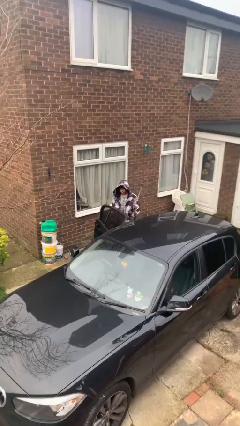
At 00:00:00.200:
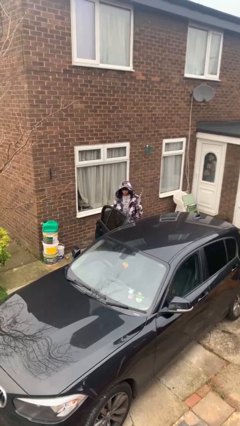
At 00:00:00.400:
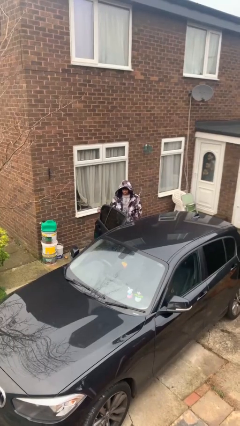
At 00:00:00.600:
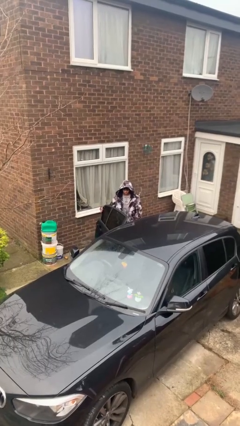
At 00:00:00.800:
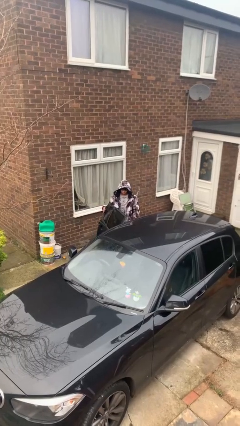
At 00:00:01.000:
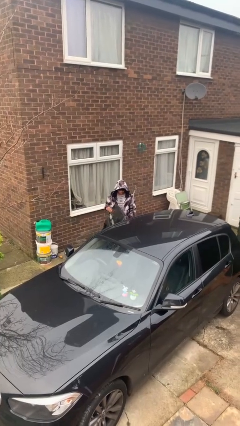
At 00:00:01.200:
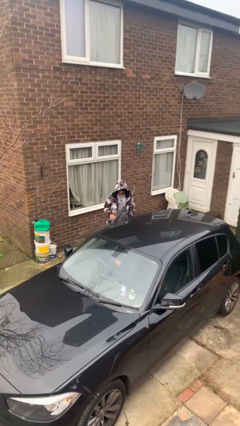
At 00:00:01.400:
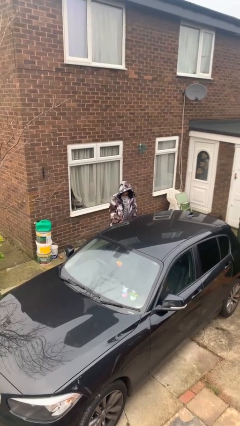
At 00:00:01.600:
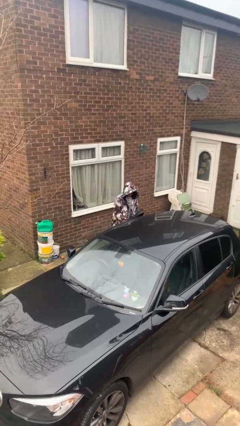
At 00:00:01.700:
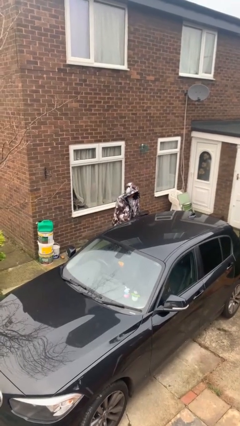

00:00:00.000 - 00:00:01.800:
person closes car door

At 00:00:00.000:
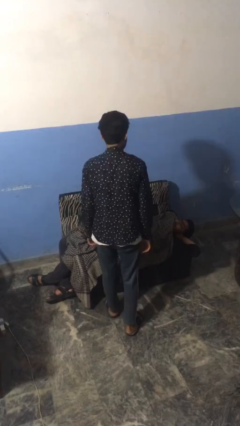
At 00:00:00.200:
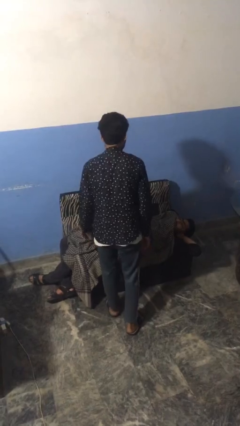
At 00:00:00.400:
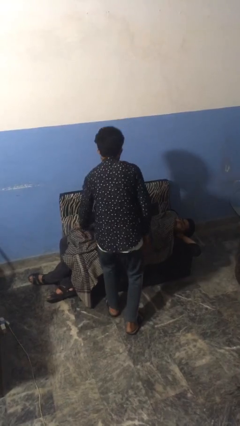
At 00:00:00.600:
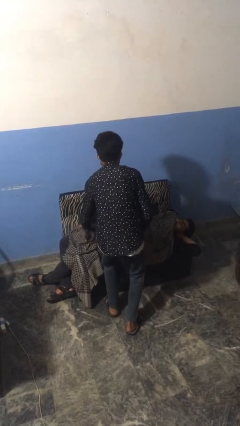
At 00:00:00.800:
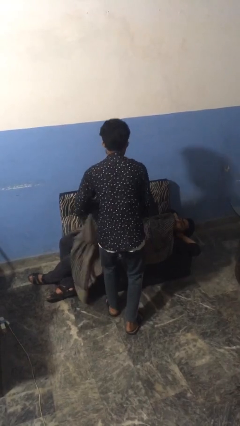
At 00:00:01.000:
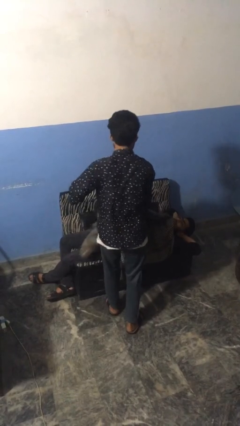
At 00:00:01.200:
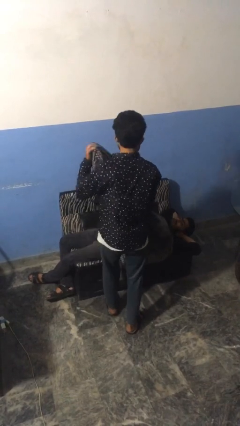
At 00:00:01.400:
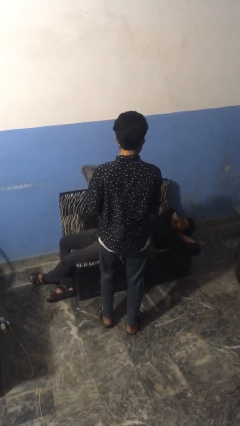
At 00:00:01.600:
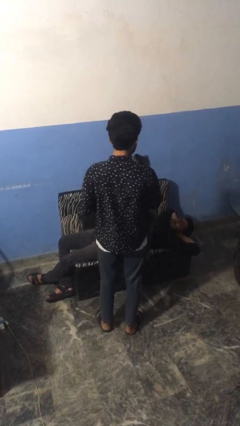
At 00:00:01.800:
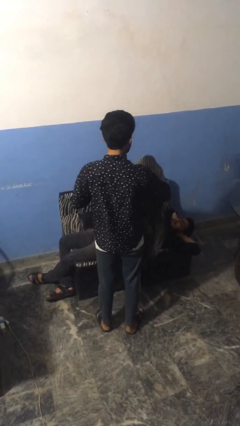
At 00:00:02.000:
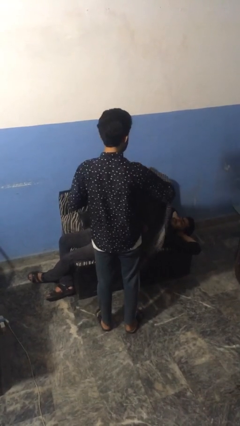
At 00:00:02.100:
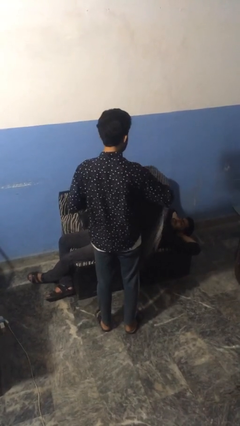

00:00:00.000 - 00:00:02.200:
person uncovers friend with blanket

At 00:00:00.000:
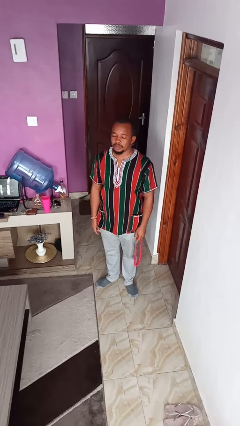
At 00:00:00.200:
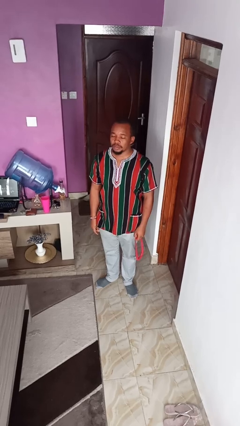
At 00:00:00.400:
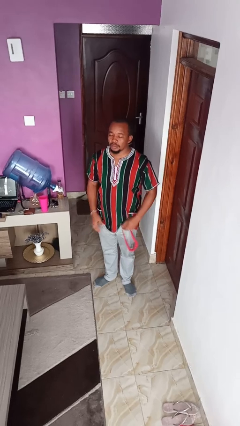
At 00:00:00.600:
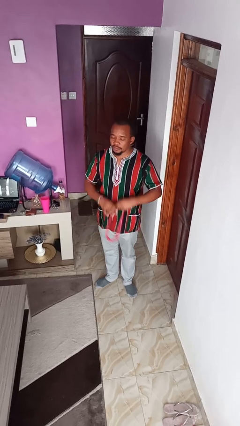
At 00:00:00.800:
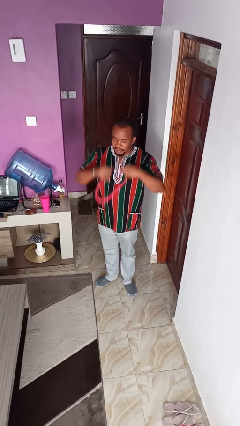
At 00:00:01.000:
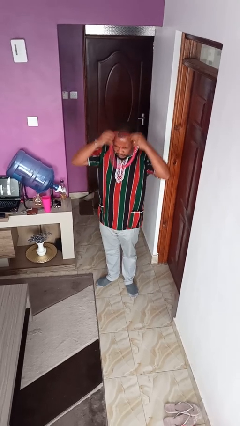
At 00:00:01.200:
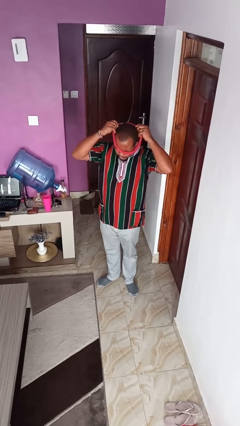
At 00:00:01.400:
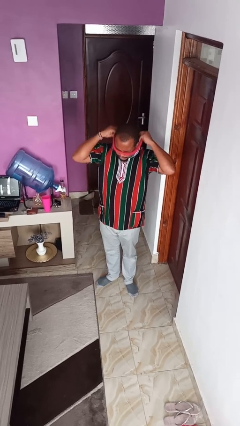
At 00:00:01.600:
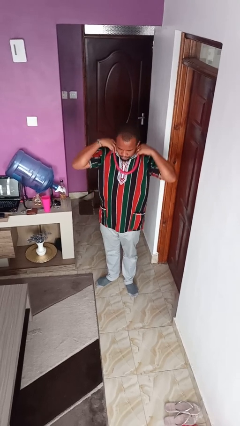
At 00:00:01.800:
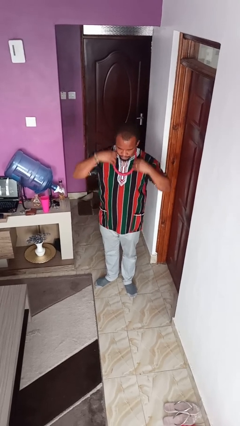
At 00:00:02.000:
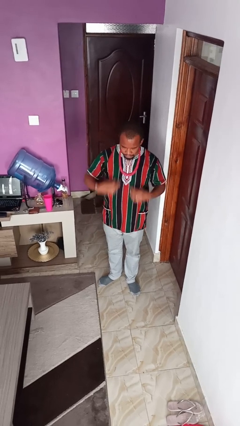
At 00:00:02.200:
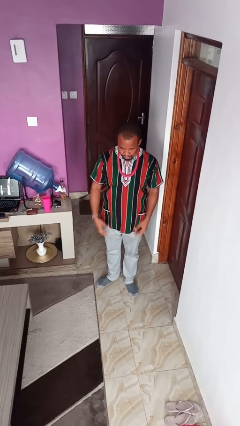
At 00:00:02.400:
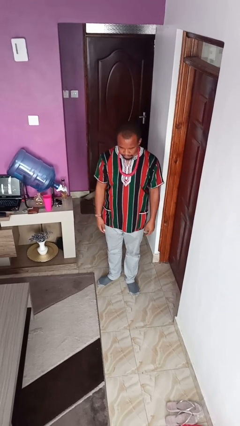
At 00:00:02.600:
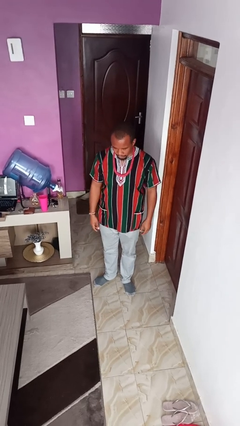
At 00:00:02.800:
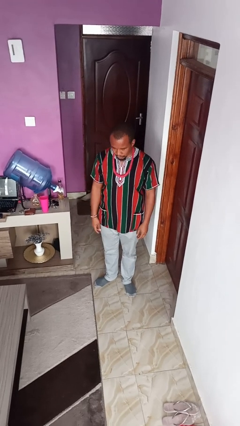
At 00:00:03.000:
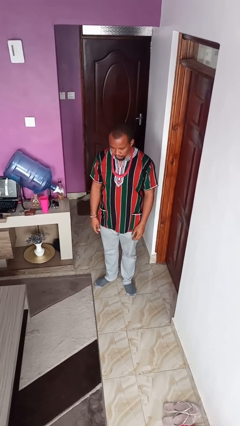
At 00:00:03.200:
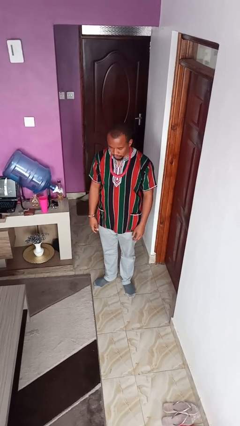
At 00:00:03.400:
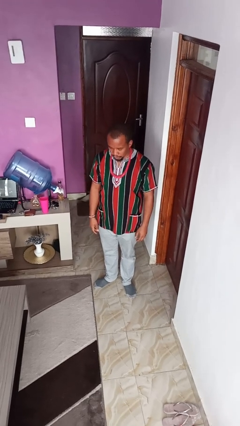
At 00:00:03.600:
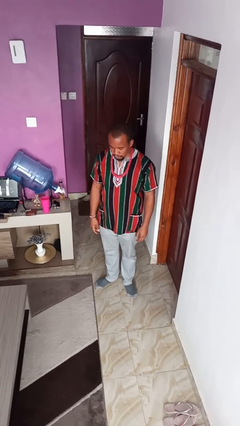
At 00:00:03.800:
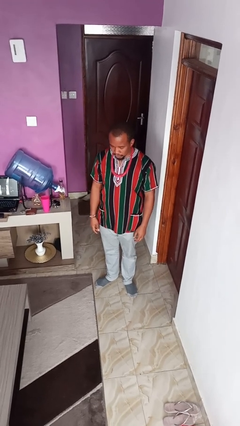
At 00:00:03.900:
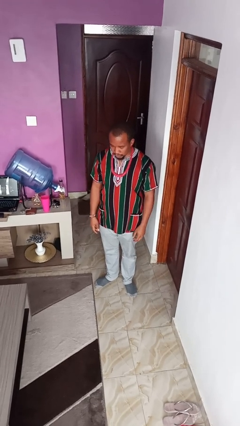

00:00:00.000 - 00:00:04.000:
person puts on necklace

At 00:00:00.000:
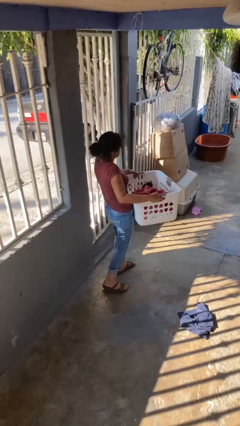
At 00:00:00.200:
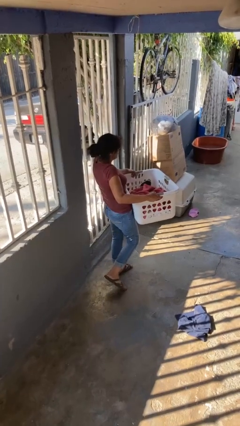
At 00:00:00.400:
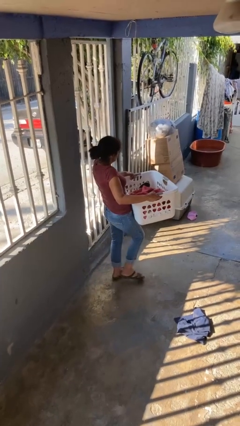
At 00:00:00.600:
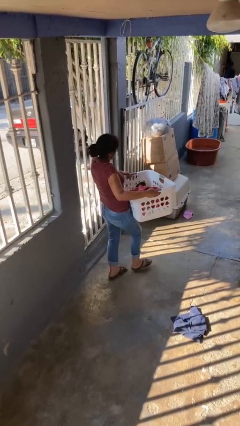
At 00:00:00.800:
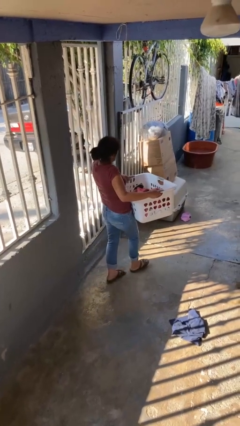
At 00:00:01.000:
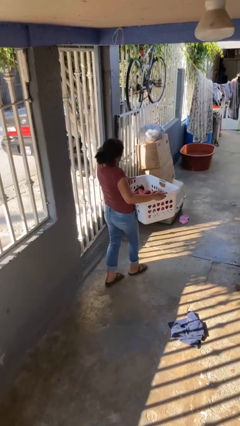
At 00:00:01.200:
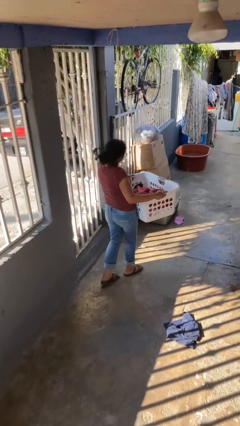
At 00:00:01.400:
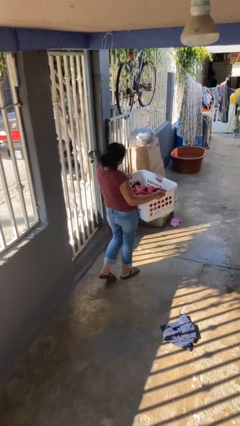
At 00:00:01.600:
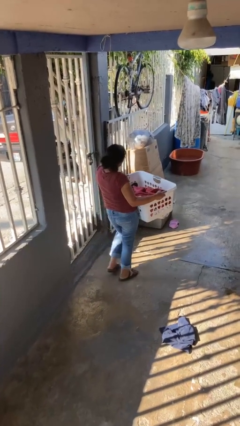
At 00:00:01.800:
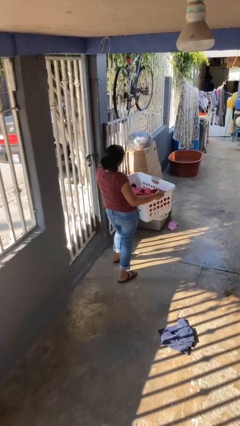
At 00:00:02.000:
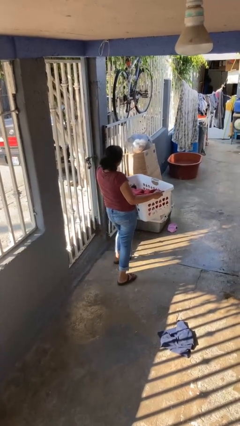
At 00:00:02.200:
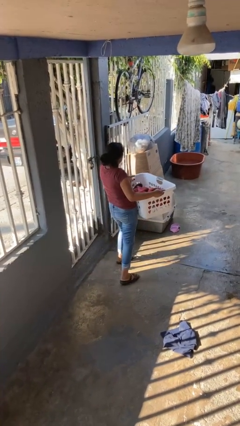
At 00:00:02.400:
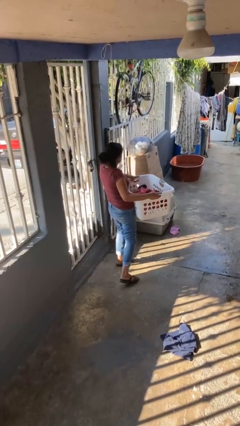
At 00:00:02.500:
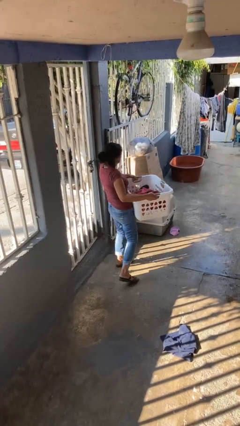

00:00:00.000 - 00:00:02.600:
person carries laundry basket

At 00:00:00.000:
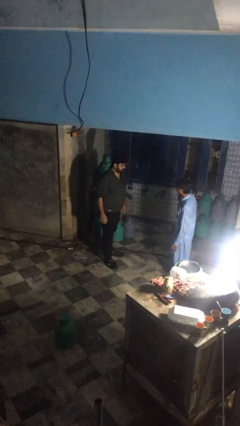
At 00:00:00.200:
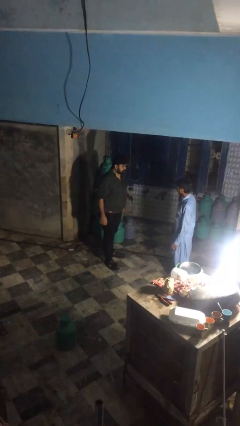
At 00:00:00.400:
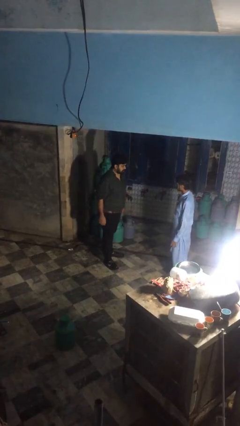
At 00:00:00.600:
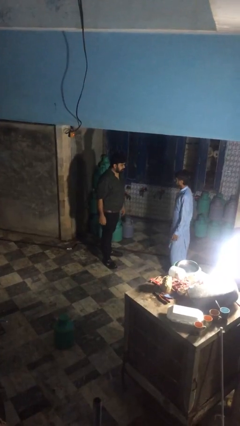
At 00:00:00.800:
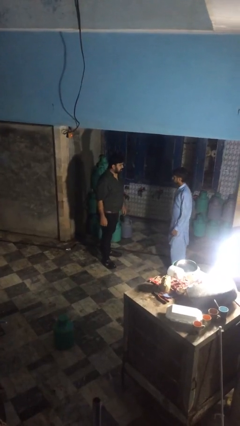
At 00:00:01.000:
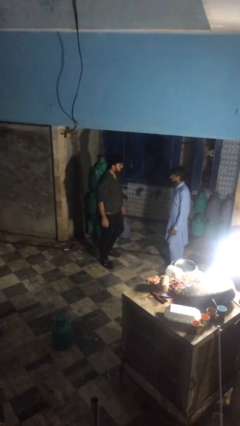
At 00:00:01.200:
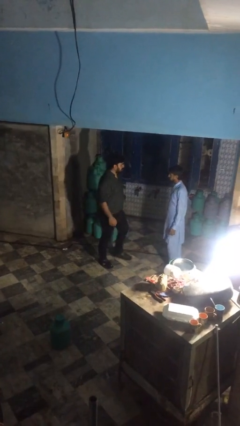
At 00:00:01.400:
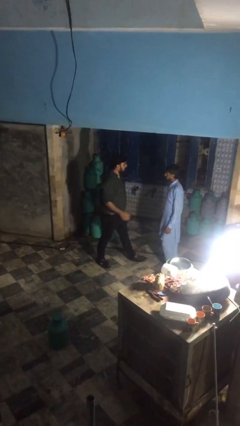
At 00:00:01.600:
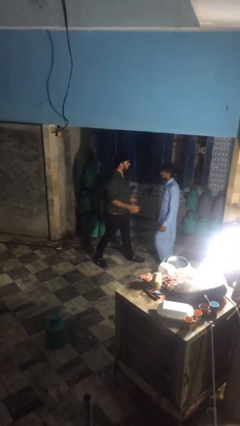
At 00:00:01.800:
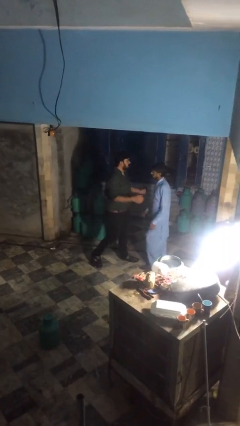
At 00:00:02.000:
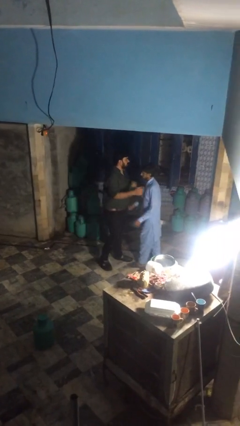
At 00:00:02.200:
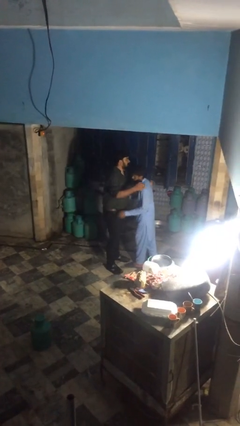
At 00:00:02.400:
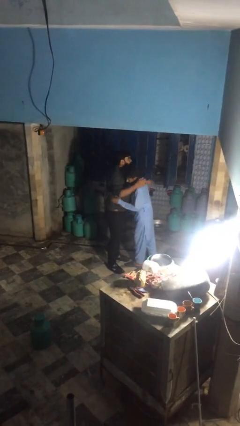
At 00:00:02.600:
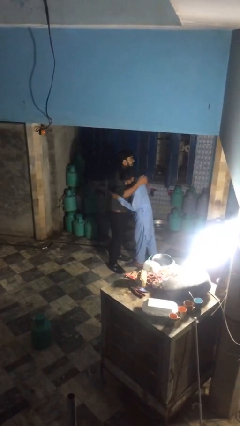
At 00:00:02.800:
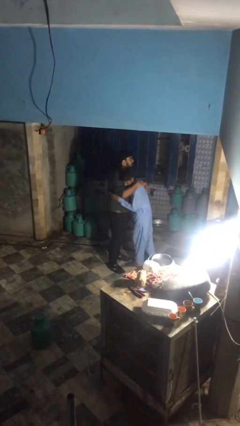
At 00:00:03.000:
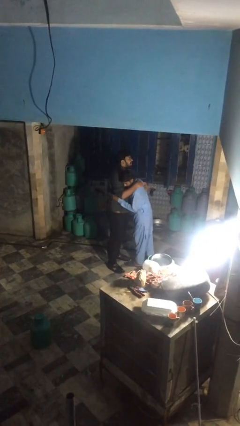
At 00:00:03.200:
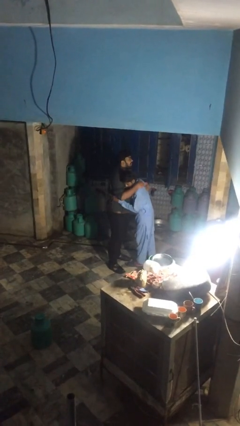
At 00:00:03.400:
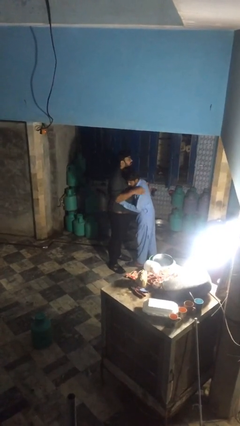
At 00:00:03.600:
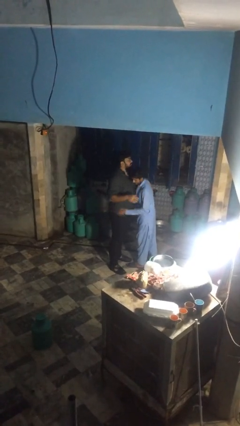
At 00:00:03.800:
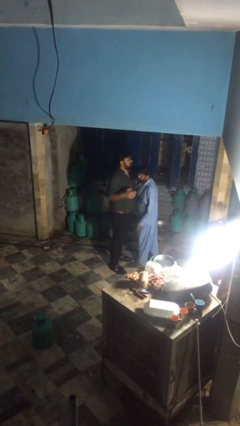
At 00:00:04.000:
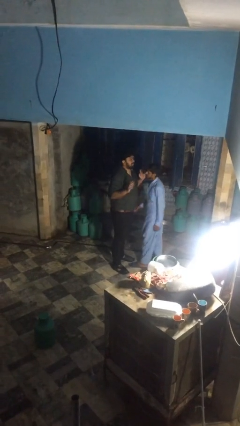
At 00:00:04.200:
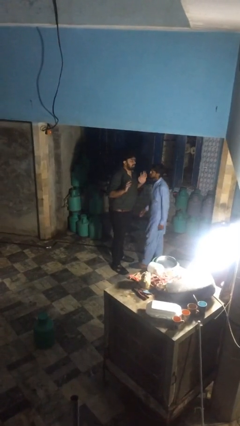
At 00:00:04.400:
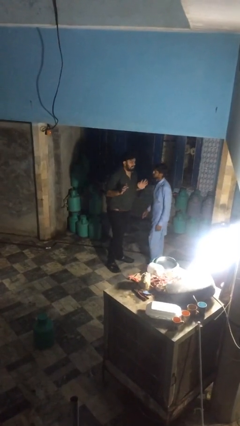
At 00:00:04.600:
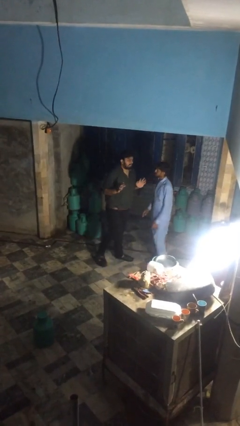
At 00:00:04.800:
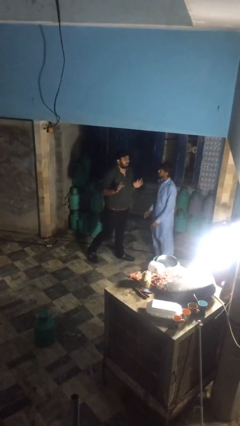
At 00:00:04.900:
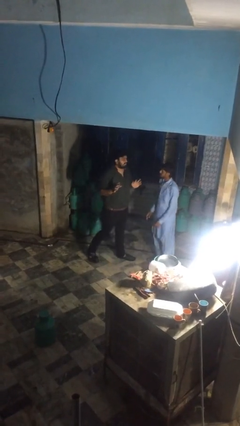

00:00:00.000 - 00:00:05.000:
person embraces person

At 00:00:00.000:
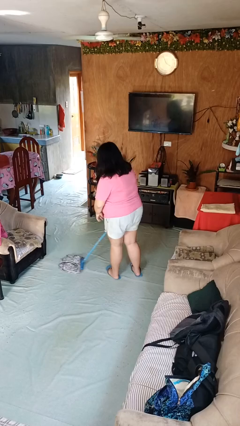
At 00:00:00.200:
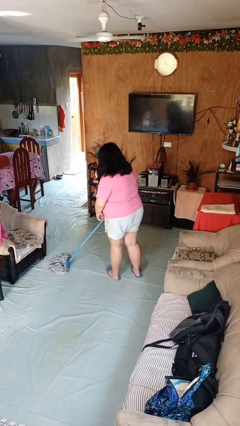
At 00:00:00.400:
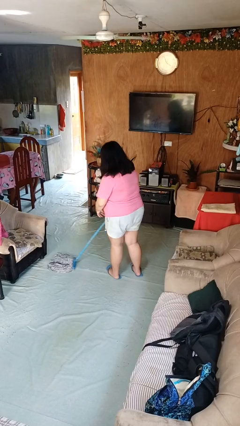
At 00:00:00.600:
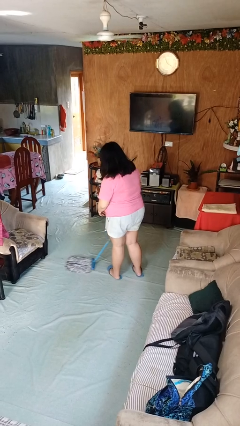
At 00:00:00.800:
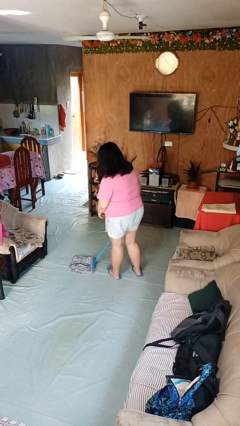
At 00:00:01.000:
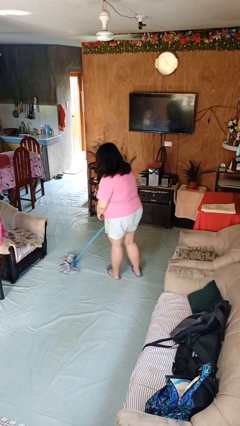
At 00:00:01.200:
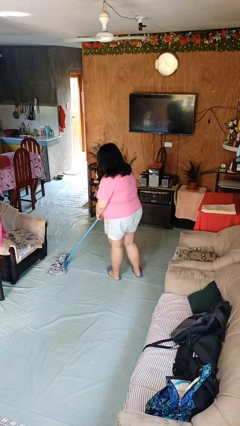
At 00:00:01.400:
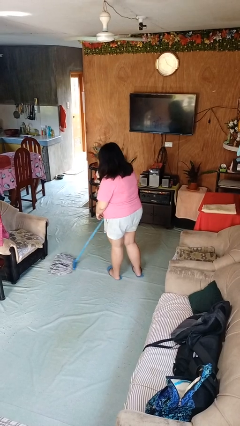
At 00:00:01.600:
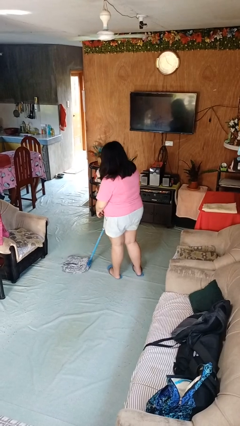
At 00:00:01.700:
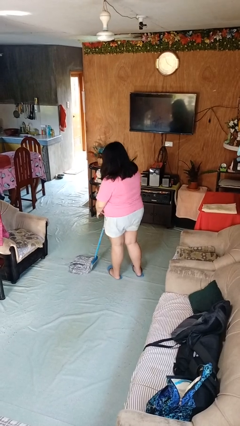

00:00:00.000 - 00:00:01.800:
person mops
